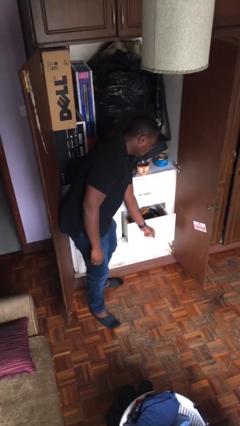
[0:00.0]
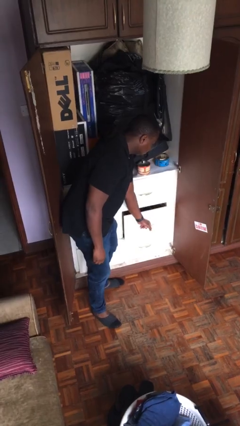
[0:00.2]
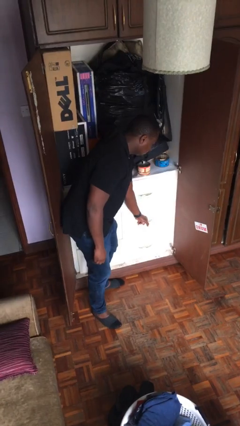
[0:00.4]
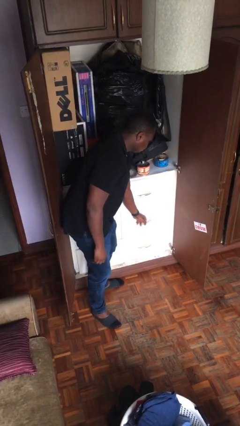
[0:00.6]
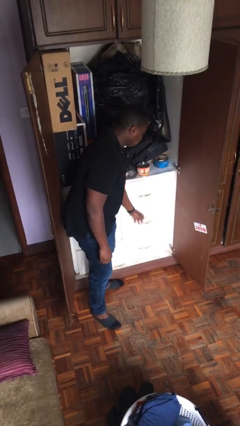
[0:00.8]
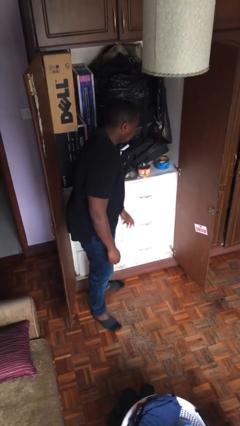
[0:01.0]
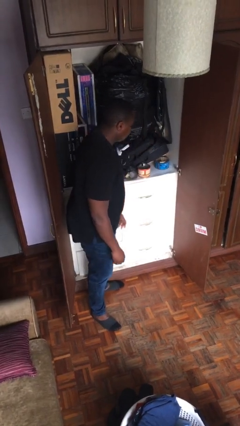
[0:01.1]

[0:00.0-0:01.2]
person closes dresser drawer

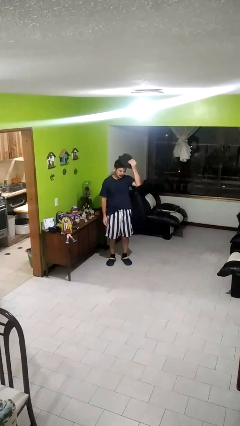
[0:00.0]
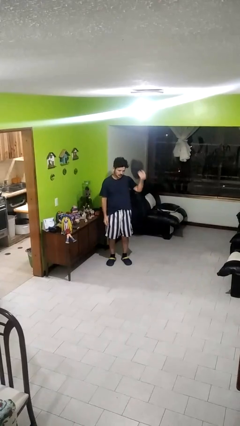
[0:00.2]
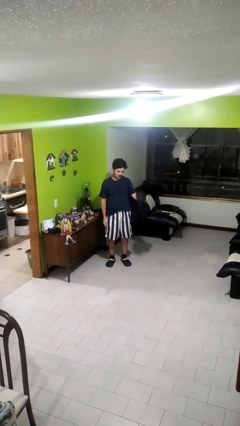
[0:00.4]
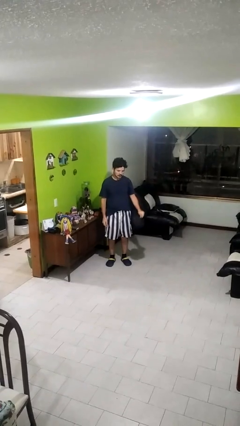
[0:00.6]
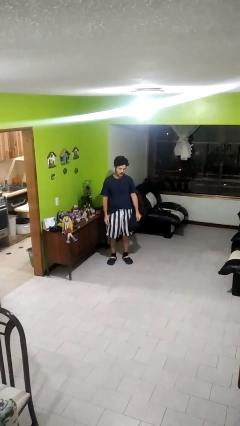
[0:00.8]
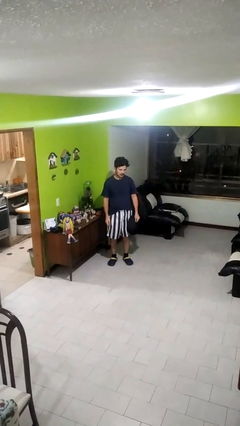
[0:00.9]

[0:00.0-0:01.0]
person takes off hat

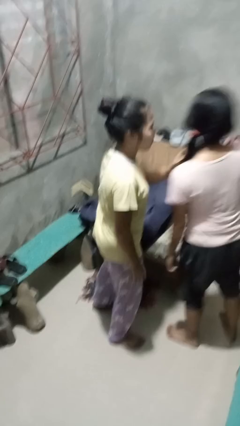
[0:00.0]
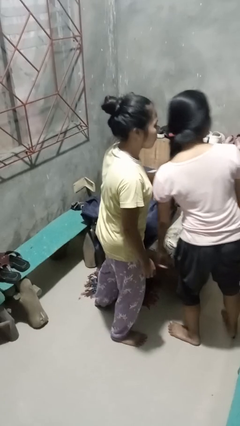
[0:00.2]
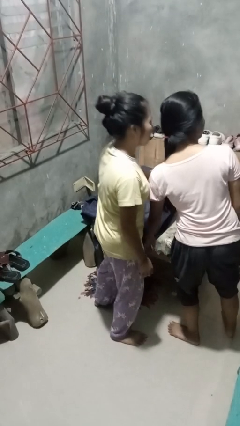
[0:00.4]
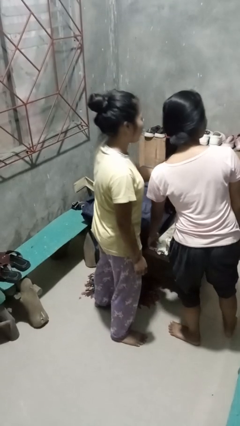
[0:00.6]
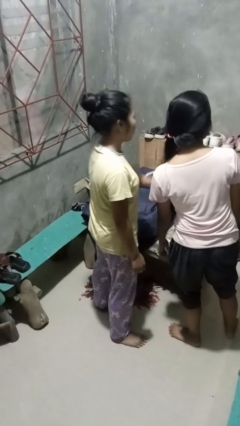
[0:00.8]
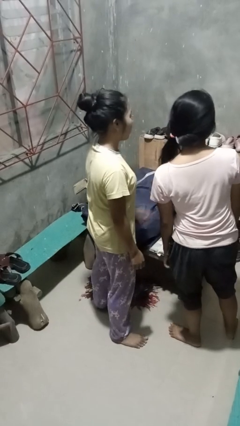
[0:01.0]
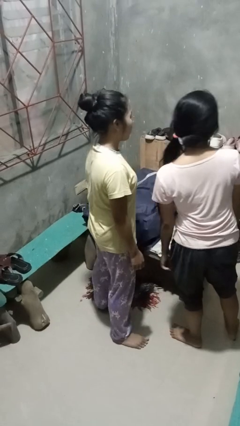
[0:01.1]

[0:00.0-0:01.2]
person grabs person by hair

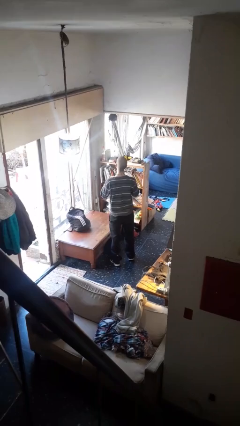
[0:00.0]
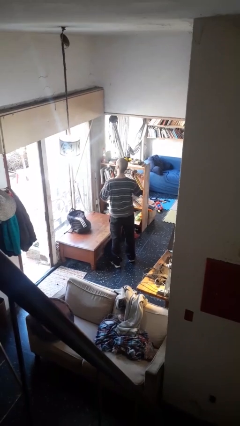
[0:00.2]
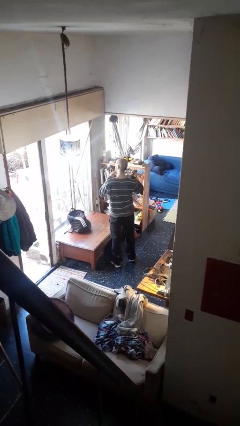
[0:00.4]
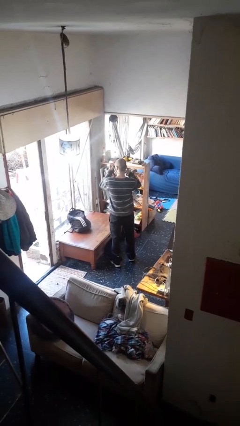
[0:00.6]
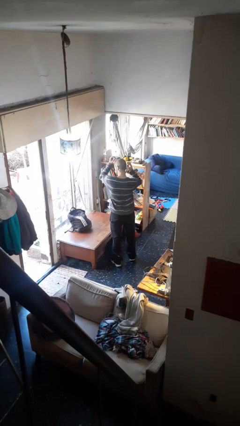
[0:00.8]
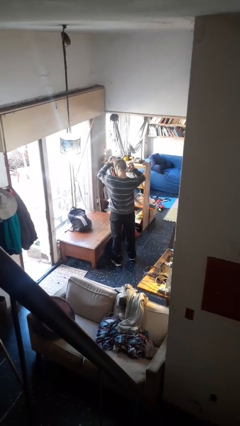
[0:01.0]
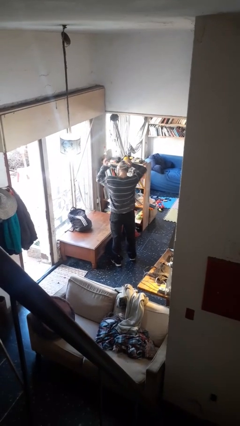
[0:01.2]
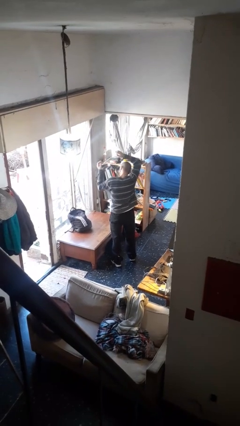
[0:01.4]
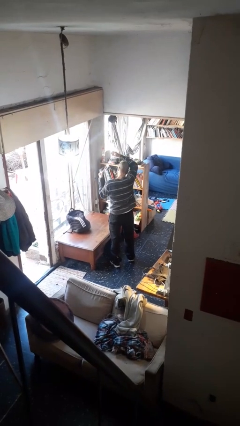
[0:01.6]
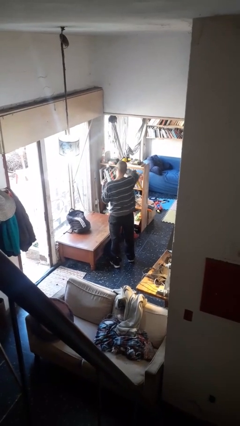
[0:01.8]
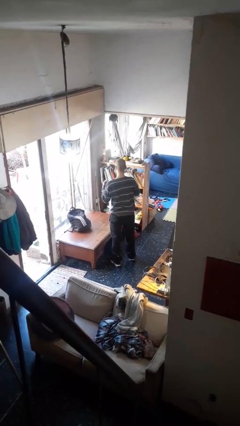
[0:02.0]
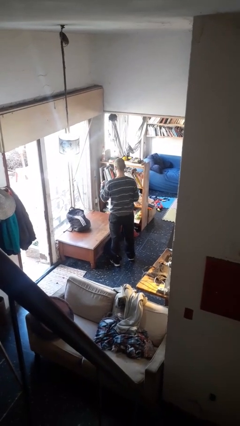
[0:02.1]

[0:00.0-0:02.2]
person takes off necklace

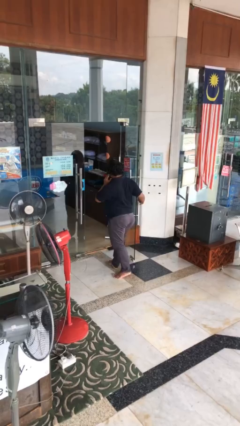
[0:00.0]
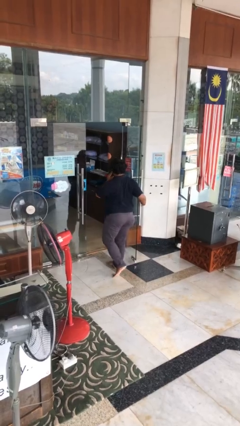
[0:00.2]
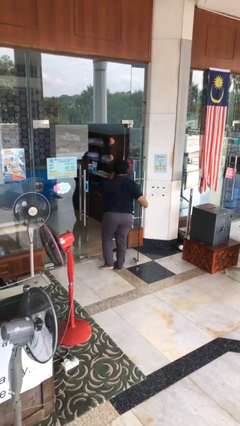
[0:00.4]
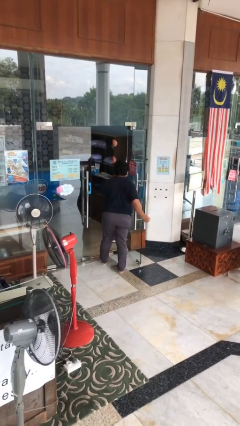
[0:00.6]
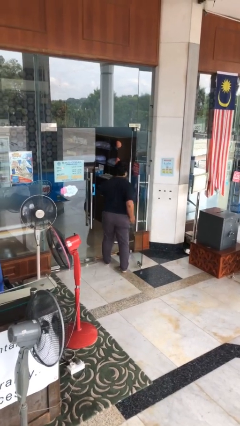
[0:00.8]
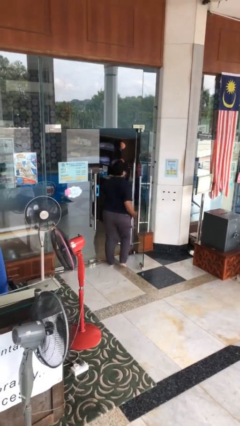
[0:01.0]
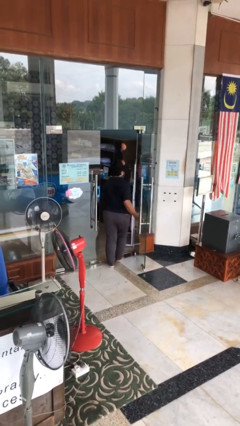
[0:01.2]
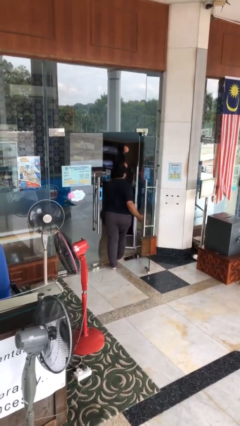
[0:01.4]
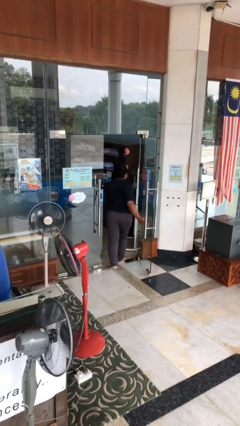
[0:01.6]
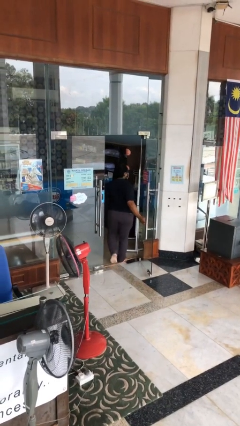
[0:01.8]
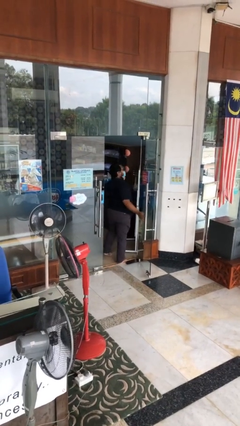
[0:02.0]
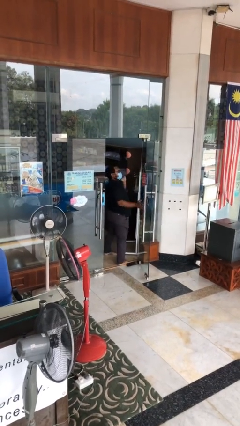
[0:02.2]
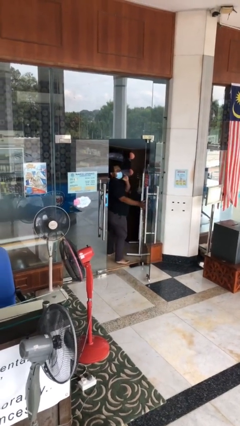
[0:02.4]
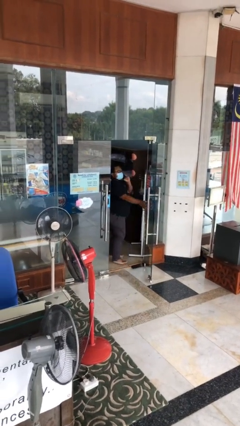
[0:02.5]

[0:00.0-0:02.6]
person exits scene through structure

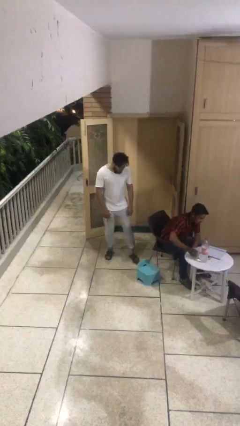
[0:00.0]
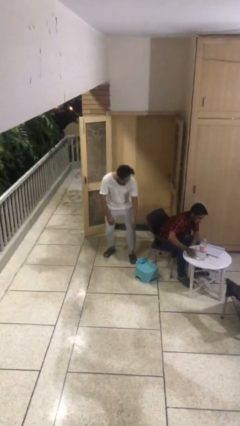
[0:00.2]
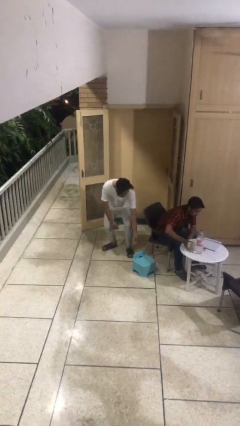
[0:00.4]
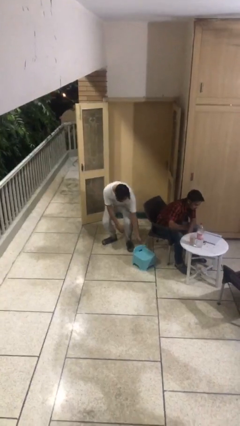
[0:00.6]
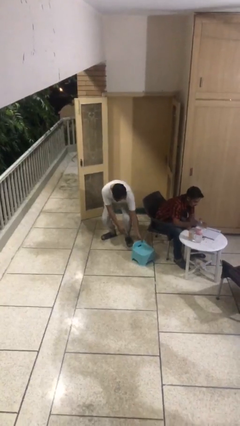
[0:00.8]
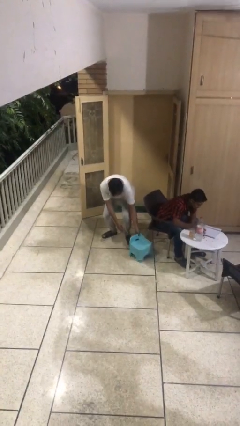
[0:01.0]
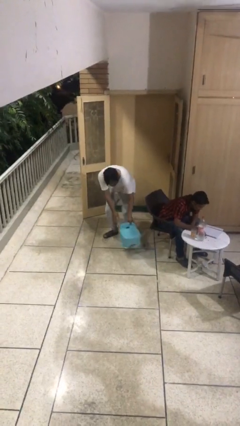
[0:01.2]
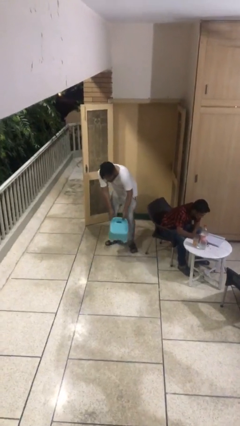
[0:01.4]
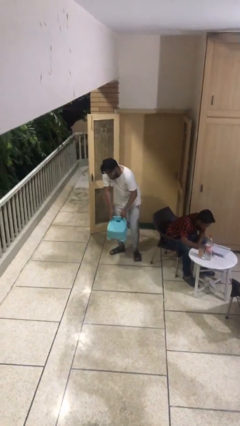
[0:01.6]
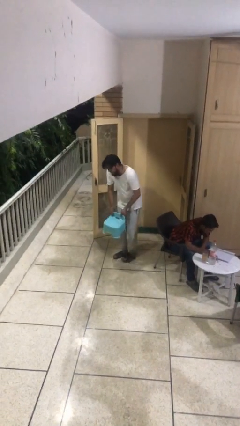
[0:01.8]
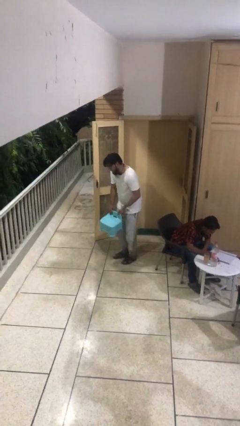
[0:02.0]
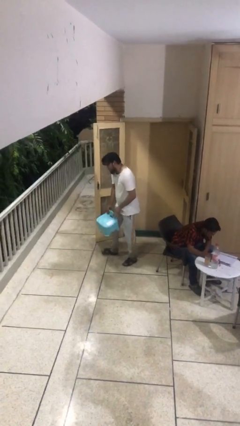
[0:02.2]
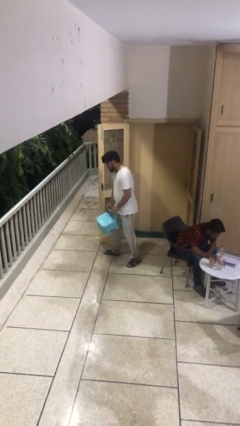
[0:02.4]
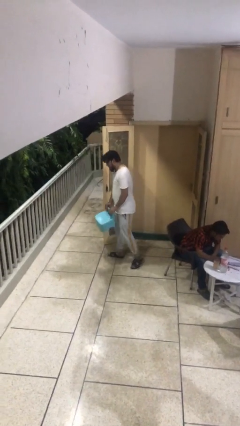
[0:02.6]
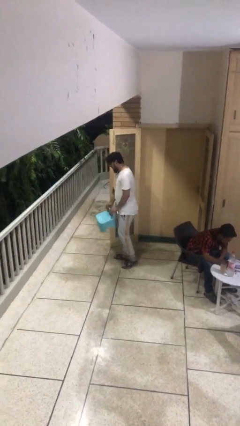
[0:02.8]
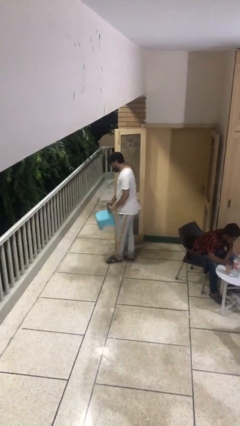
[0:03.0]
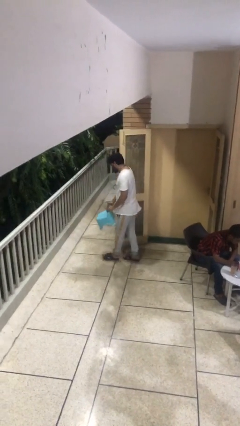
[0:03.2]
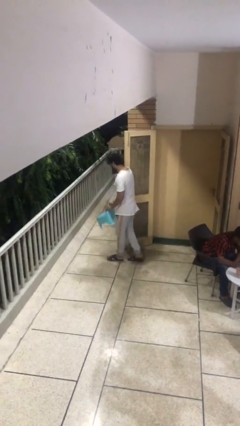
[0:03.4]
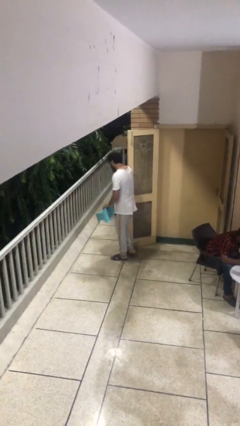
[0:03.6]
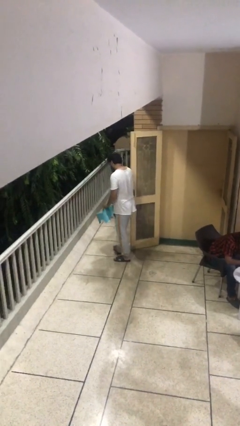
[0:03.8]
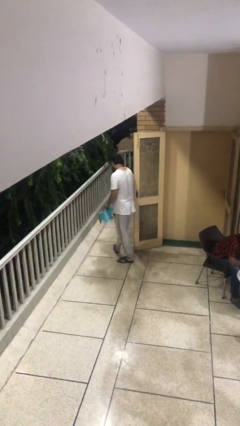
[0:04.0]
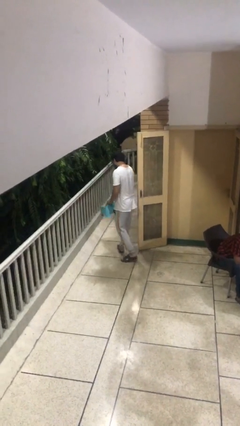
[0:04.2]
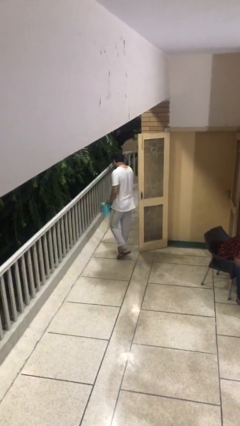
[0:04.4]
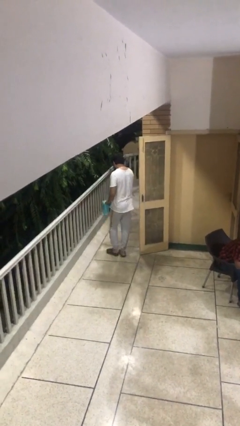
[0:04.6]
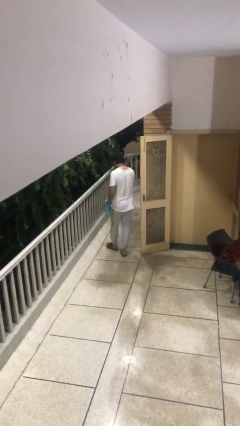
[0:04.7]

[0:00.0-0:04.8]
person steals object from person

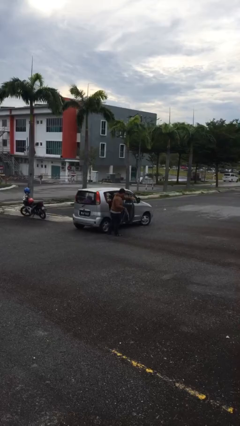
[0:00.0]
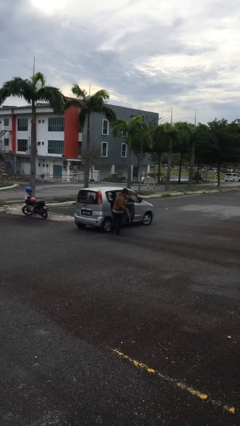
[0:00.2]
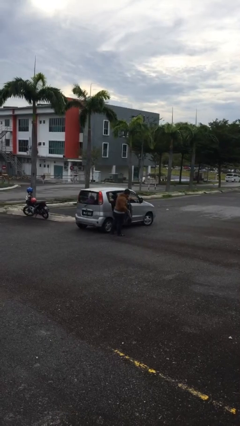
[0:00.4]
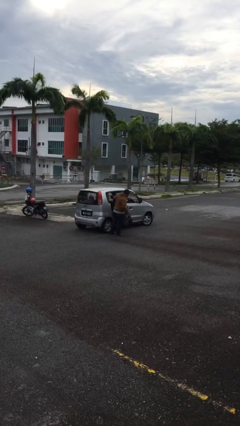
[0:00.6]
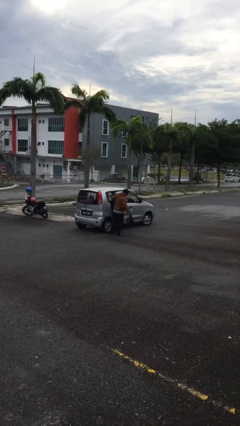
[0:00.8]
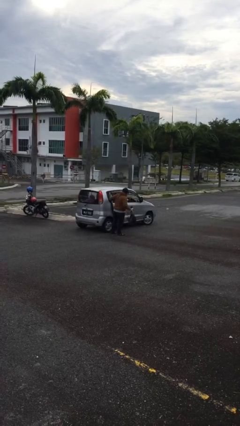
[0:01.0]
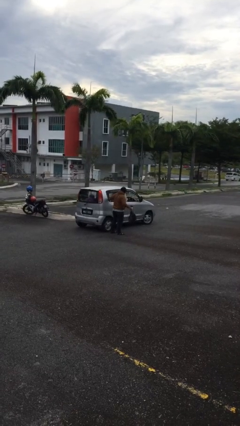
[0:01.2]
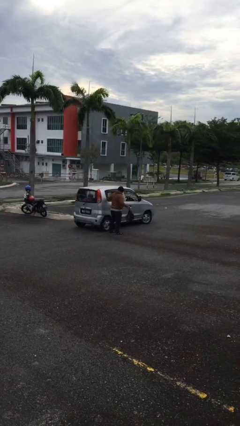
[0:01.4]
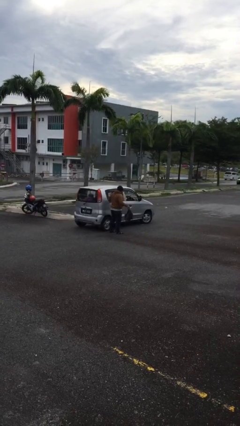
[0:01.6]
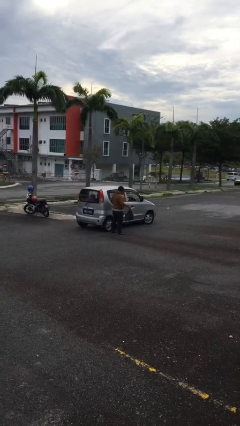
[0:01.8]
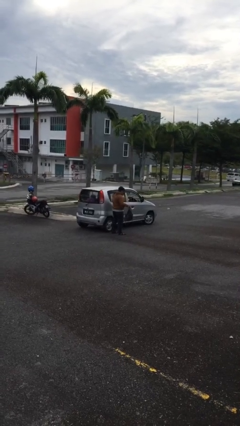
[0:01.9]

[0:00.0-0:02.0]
person closes car door

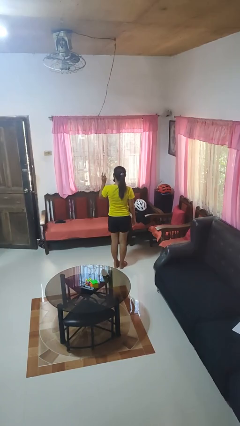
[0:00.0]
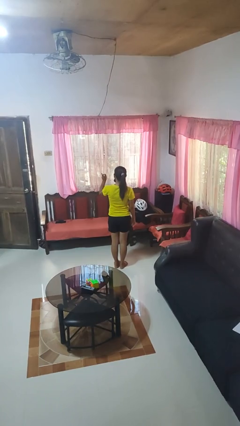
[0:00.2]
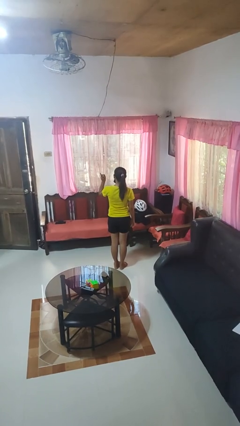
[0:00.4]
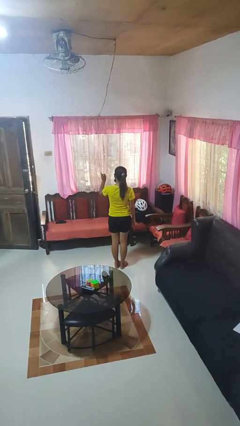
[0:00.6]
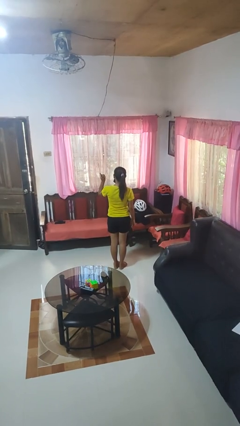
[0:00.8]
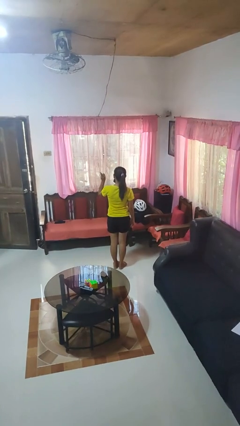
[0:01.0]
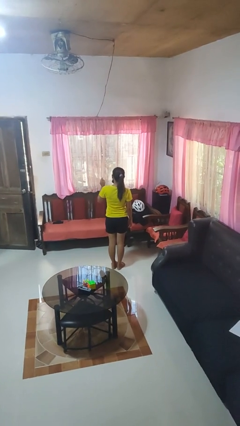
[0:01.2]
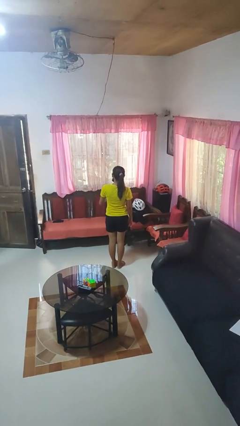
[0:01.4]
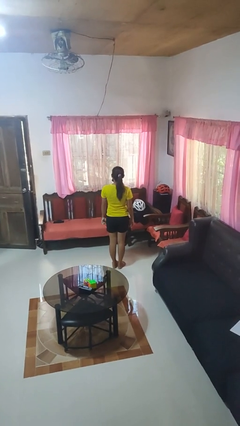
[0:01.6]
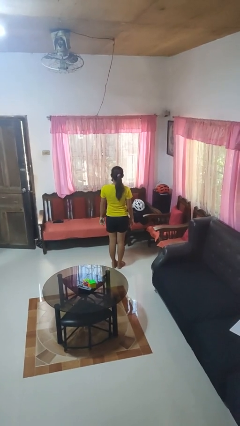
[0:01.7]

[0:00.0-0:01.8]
person gestures number three

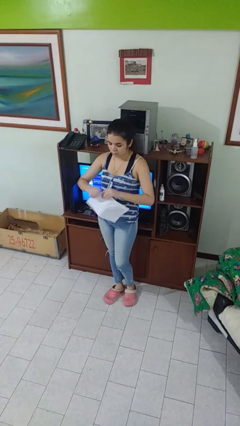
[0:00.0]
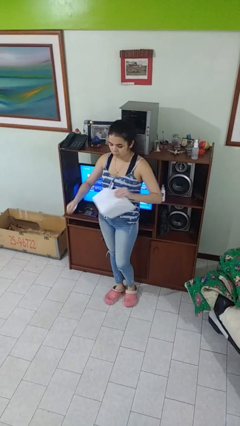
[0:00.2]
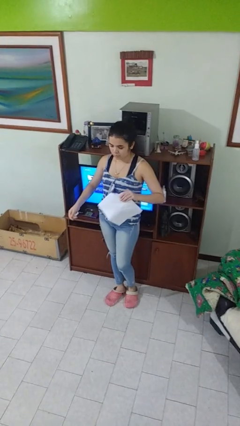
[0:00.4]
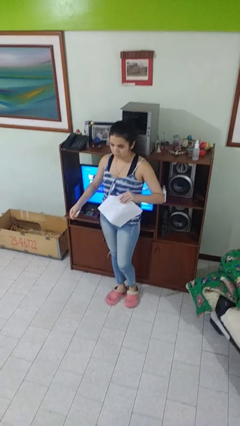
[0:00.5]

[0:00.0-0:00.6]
person tears paper
